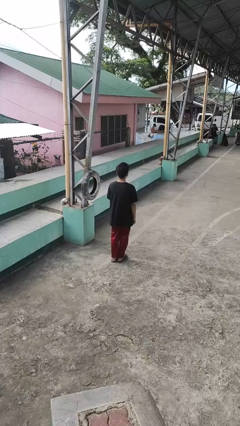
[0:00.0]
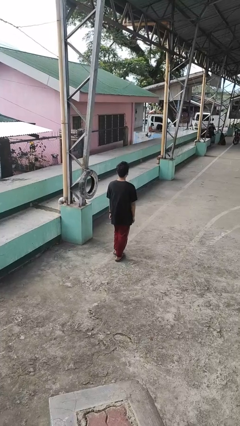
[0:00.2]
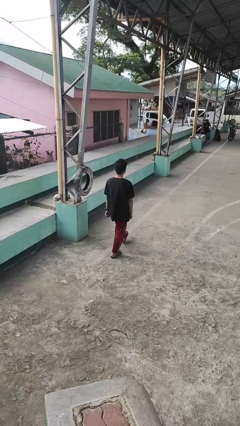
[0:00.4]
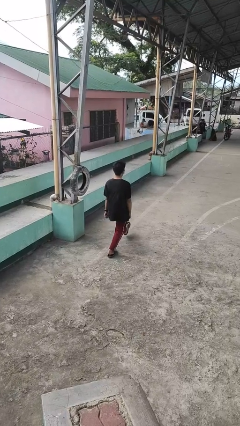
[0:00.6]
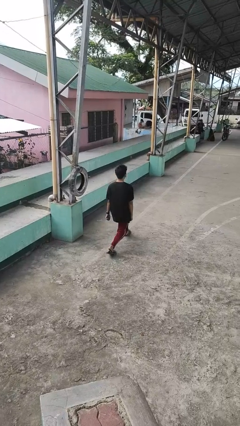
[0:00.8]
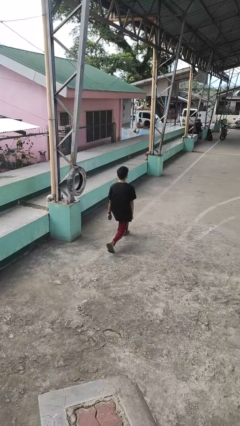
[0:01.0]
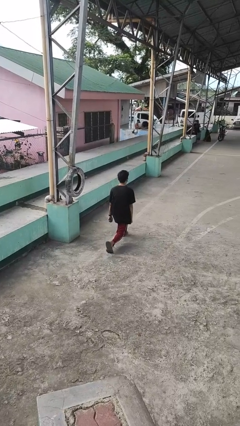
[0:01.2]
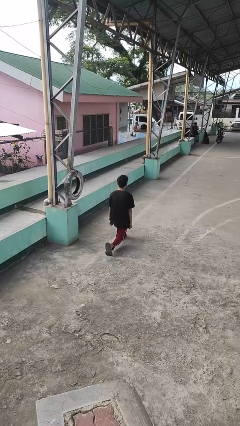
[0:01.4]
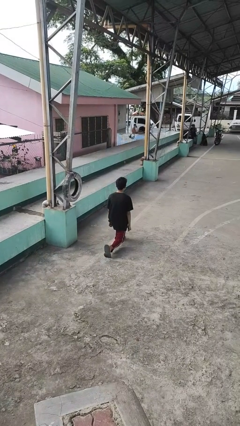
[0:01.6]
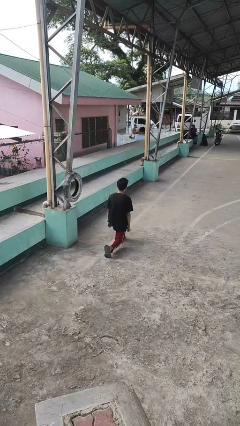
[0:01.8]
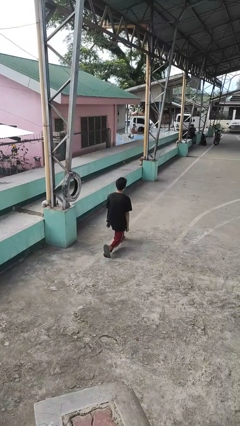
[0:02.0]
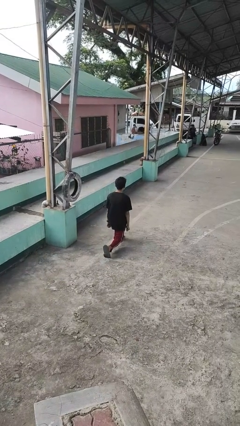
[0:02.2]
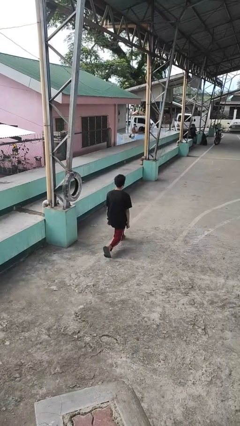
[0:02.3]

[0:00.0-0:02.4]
person exercises with lunges

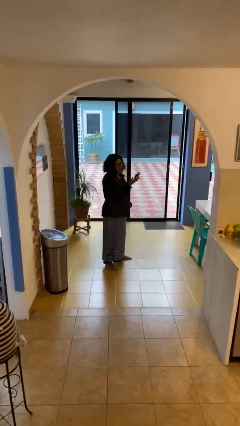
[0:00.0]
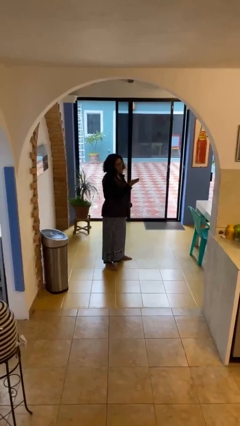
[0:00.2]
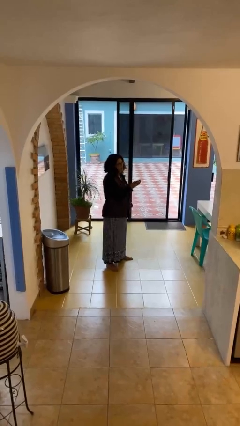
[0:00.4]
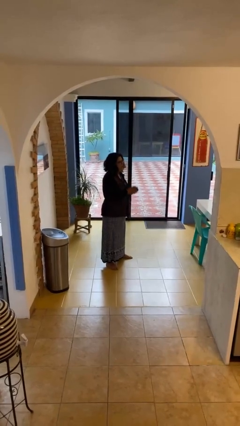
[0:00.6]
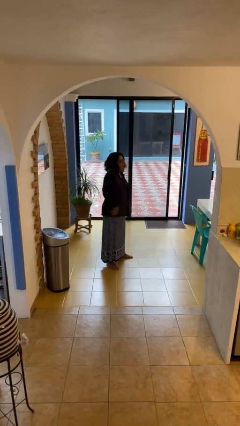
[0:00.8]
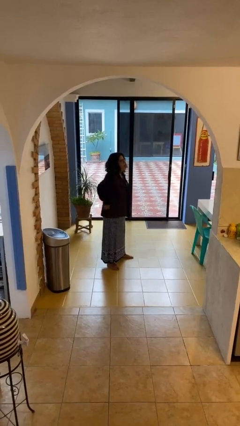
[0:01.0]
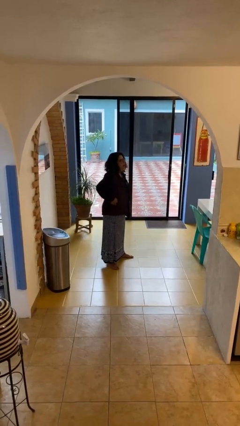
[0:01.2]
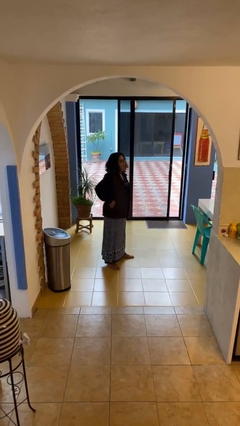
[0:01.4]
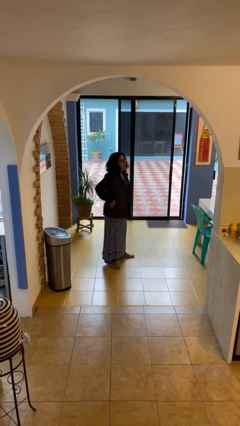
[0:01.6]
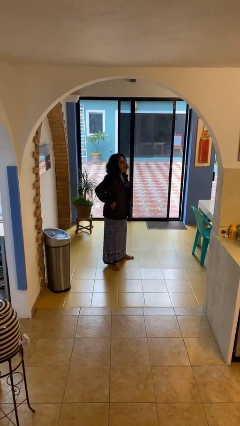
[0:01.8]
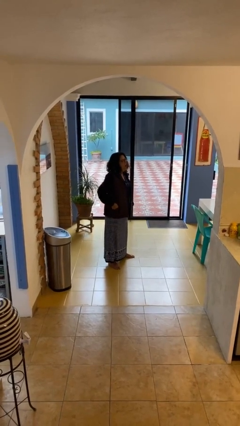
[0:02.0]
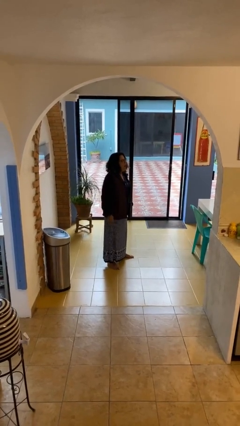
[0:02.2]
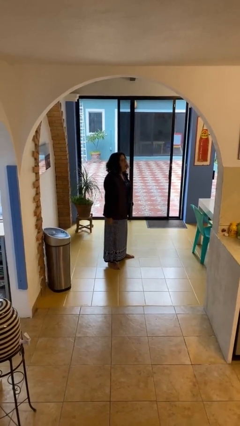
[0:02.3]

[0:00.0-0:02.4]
person puts phone into pocket

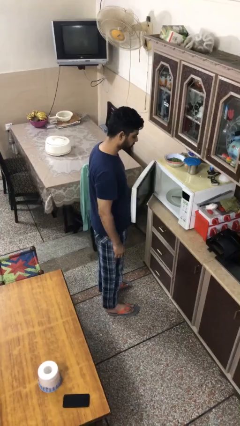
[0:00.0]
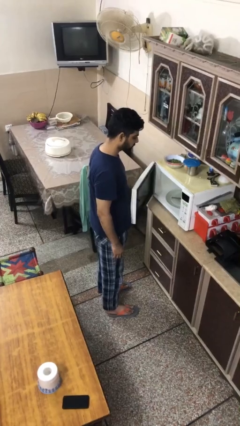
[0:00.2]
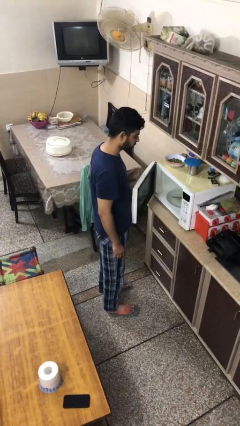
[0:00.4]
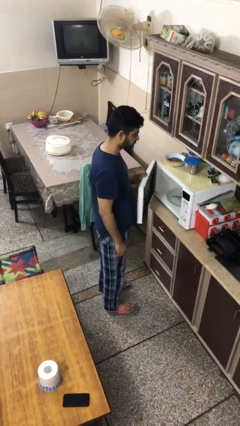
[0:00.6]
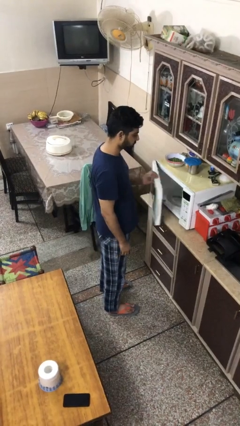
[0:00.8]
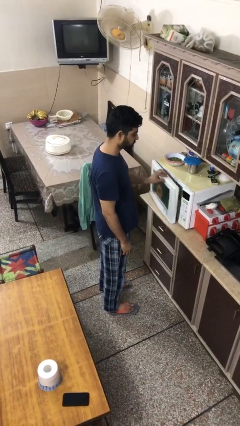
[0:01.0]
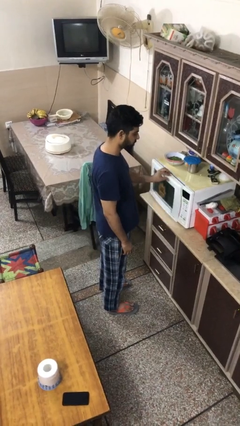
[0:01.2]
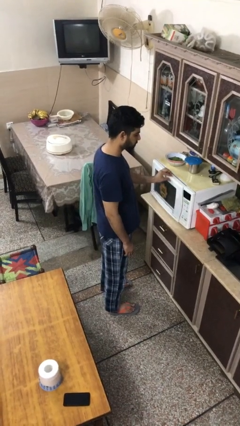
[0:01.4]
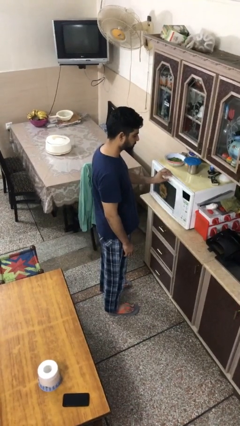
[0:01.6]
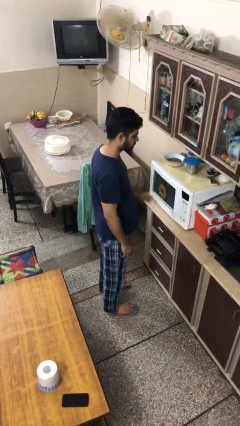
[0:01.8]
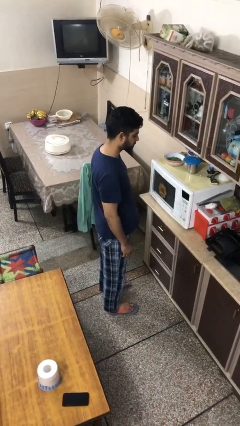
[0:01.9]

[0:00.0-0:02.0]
person closes oven door

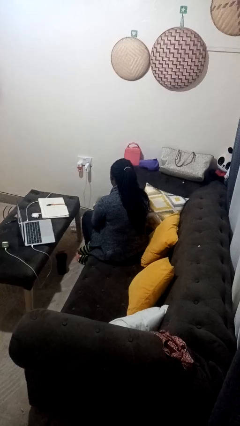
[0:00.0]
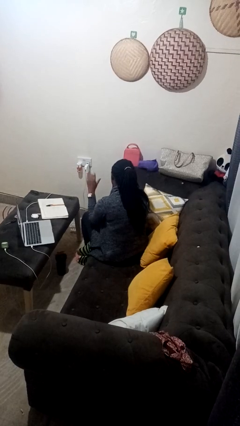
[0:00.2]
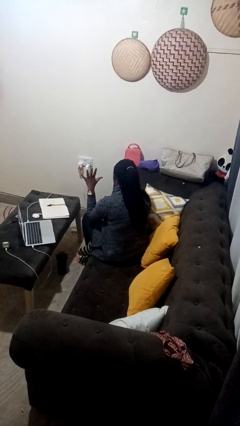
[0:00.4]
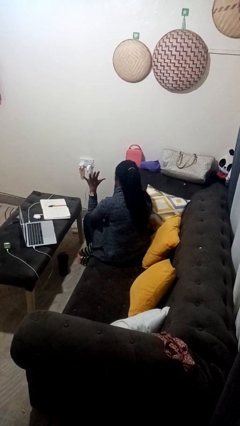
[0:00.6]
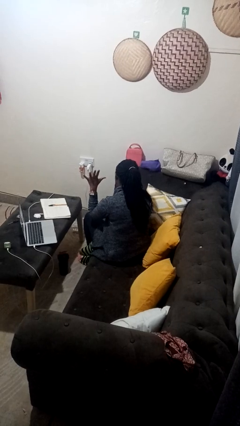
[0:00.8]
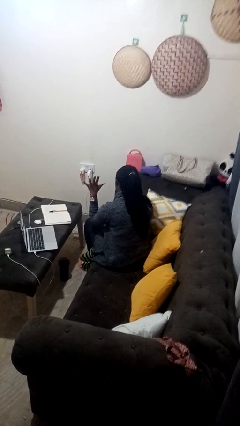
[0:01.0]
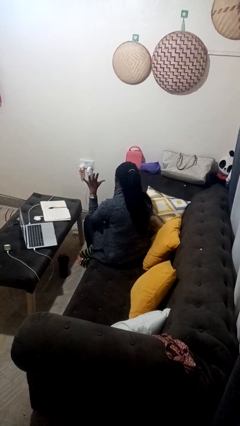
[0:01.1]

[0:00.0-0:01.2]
person gestures number five

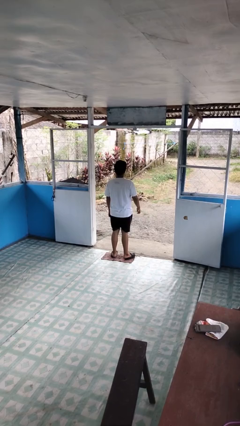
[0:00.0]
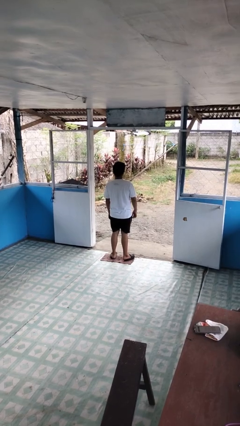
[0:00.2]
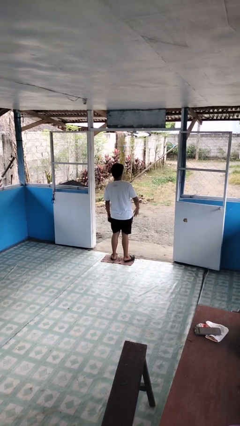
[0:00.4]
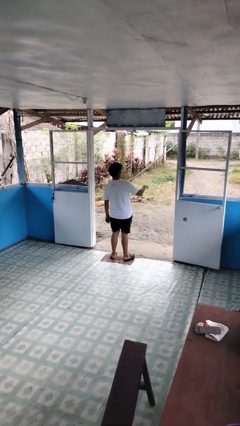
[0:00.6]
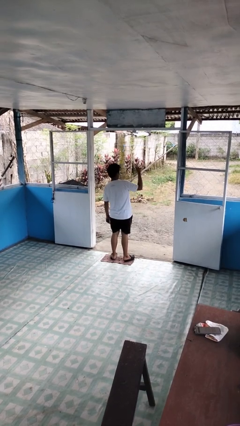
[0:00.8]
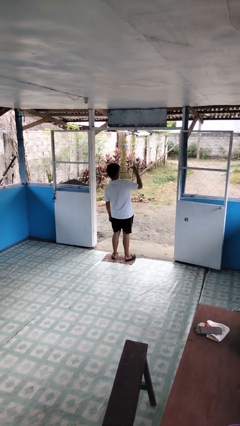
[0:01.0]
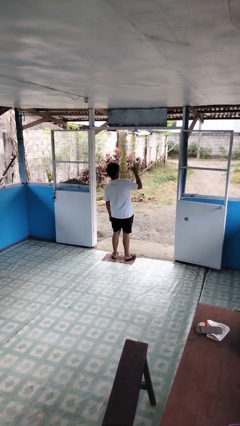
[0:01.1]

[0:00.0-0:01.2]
person gestures hang loose

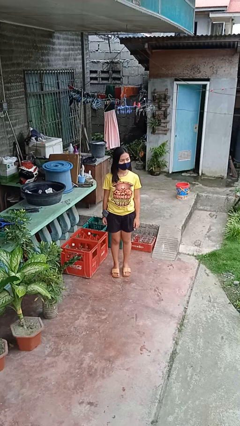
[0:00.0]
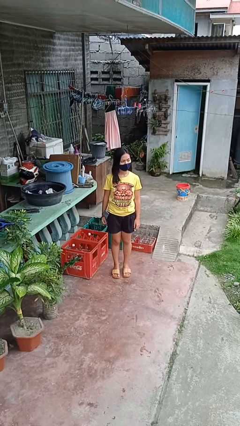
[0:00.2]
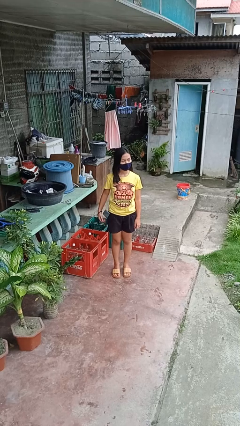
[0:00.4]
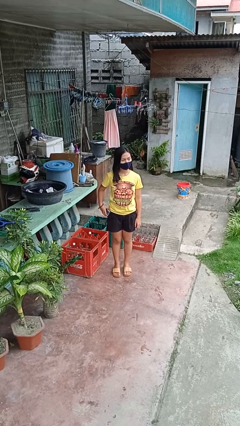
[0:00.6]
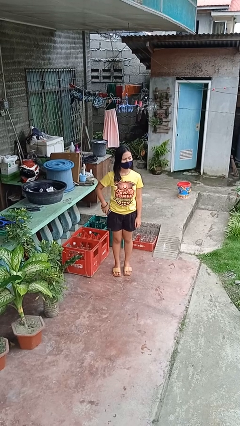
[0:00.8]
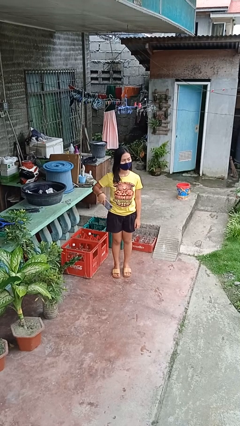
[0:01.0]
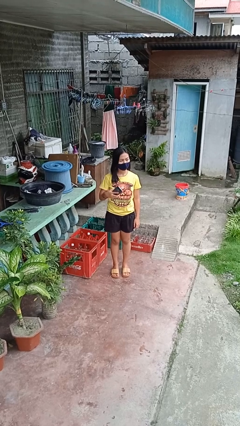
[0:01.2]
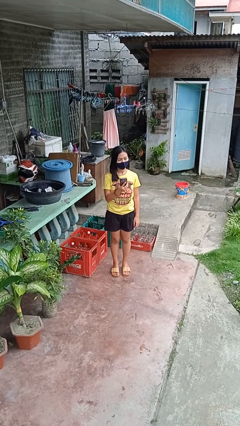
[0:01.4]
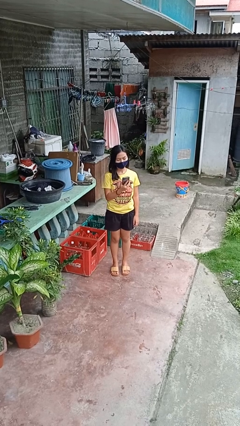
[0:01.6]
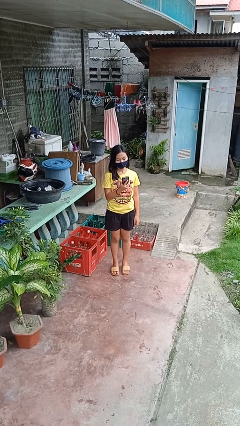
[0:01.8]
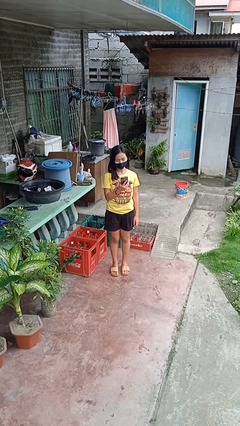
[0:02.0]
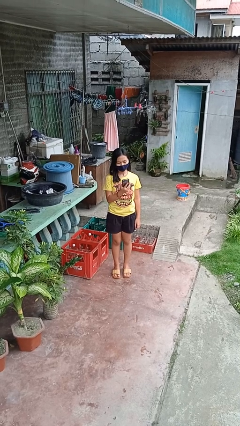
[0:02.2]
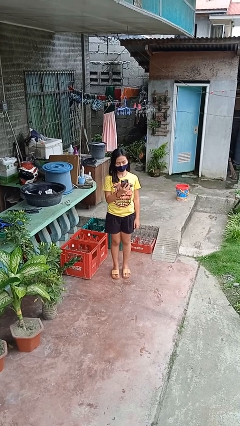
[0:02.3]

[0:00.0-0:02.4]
person takes phone from pocket

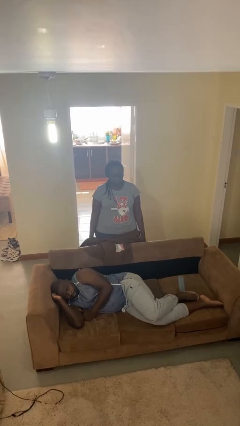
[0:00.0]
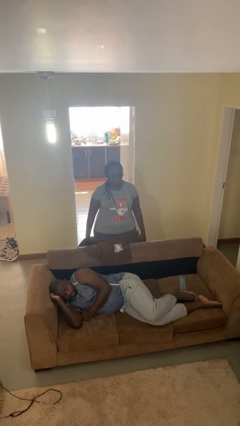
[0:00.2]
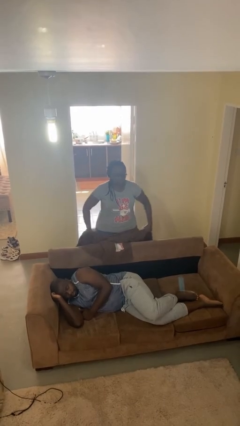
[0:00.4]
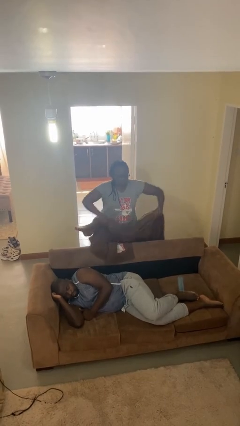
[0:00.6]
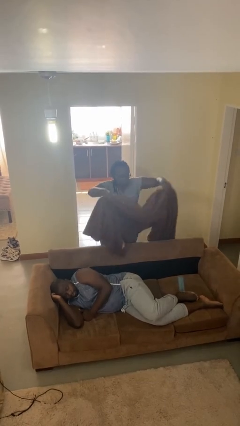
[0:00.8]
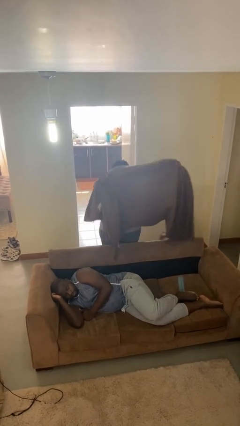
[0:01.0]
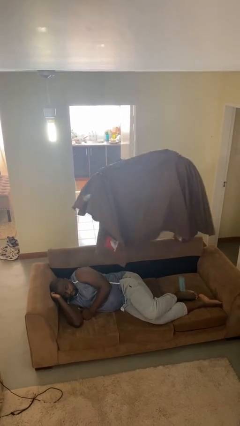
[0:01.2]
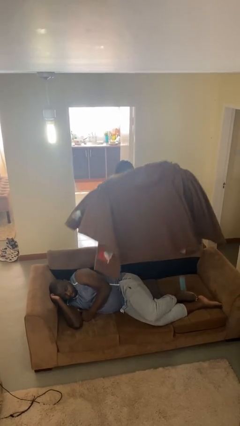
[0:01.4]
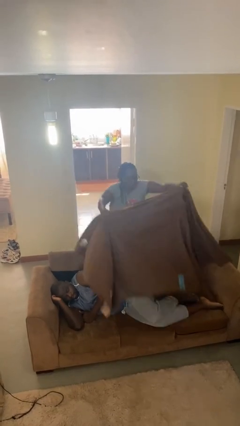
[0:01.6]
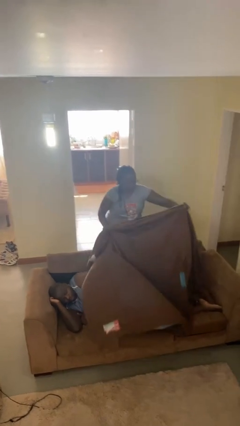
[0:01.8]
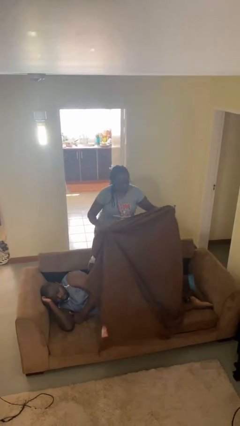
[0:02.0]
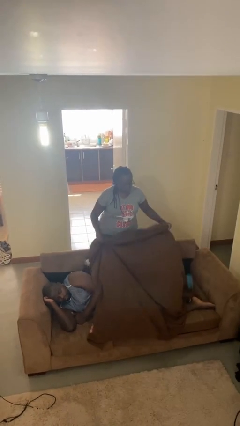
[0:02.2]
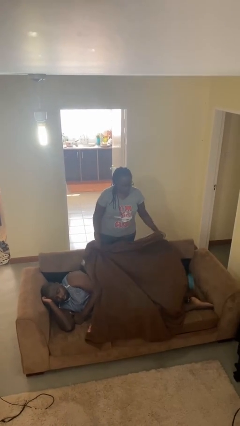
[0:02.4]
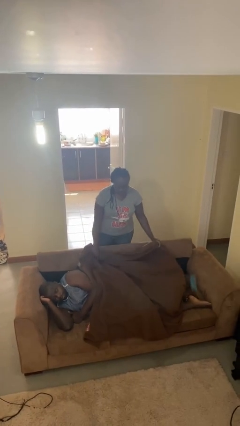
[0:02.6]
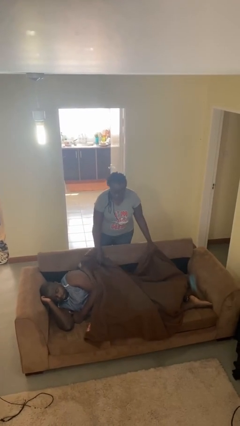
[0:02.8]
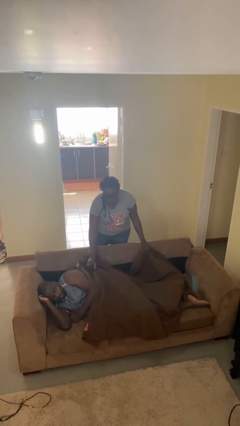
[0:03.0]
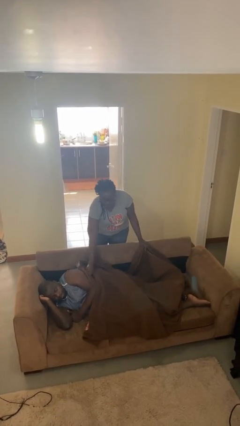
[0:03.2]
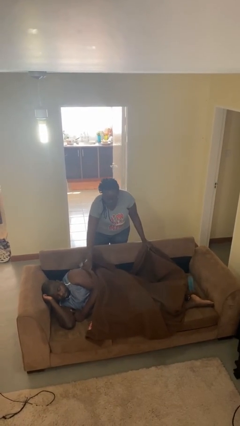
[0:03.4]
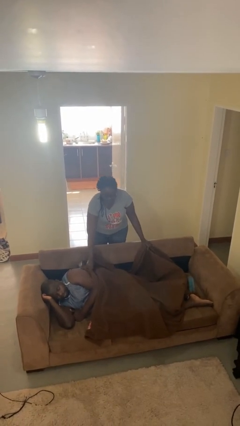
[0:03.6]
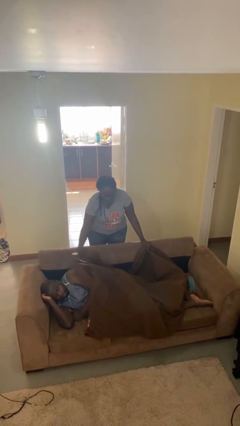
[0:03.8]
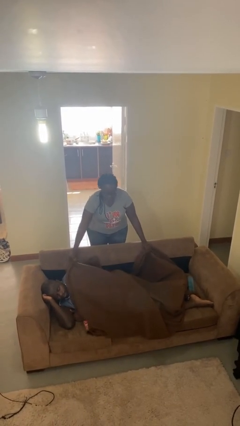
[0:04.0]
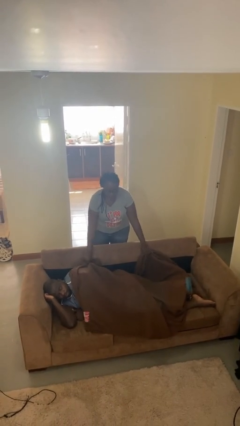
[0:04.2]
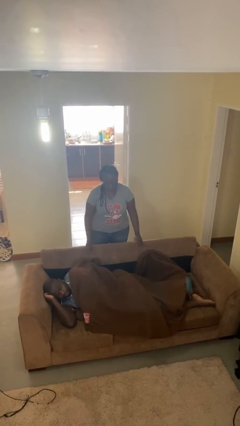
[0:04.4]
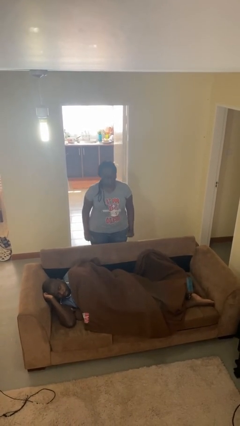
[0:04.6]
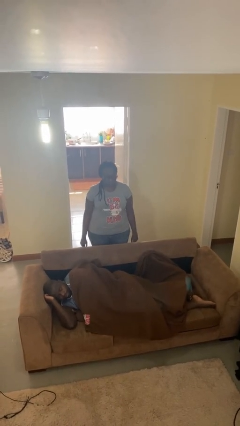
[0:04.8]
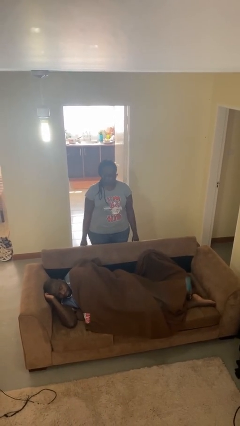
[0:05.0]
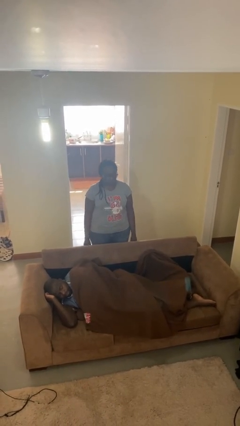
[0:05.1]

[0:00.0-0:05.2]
person covers friend with blanket
